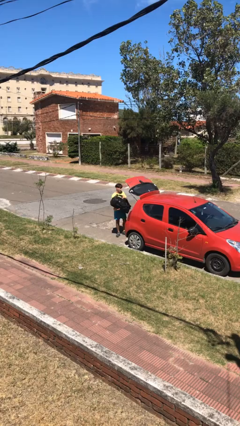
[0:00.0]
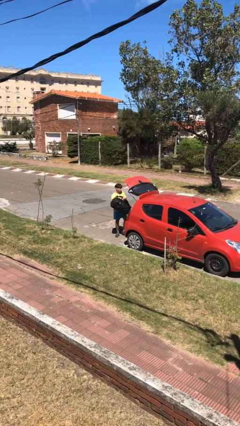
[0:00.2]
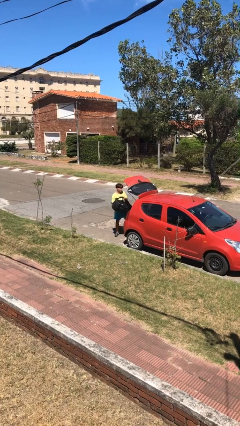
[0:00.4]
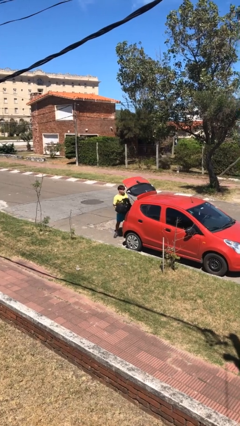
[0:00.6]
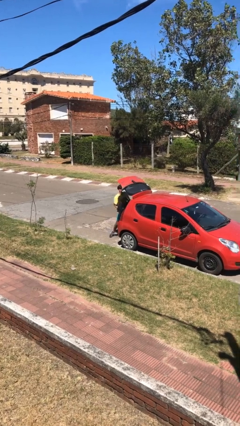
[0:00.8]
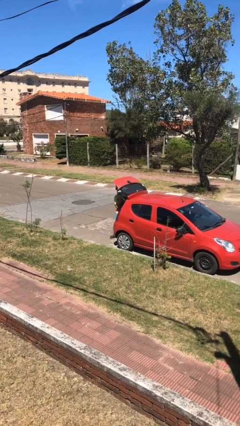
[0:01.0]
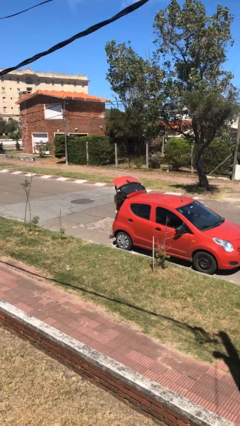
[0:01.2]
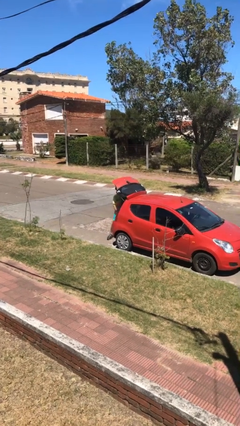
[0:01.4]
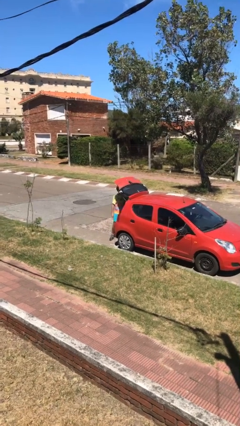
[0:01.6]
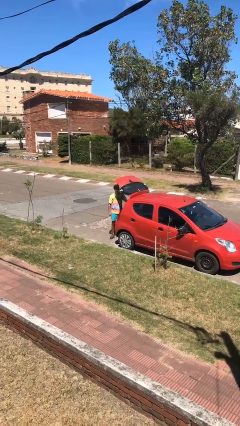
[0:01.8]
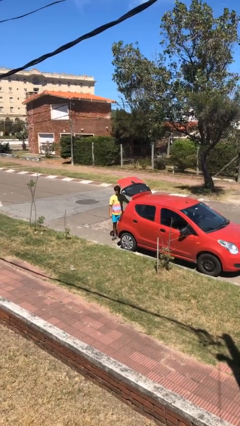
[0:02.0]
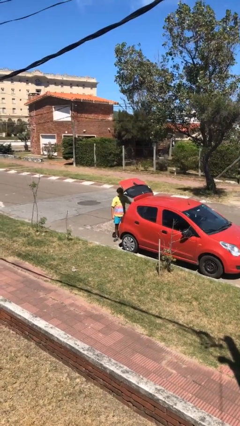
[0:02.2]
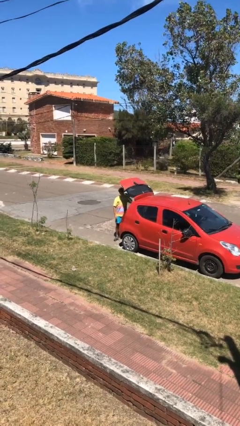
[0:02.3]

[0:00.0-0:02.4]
person loads car

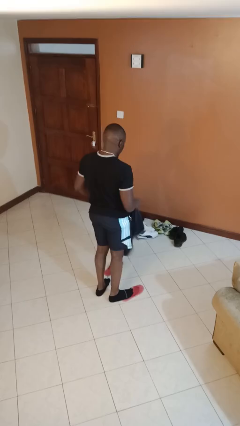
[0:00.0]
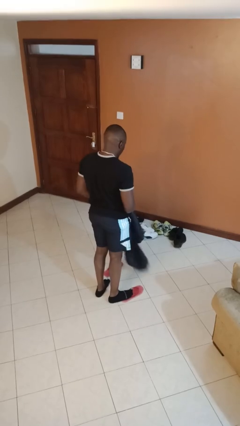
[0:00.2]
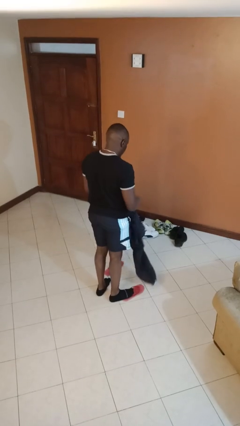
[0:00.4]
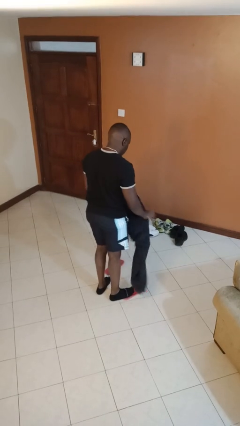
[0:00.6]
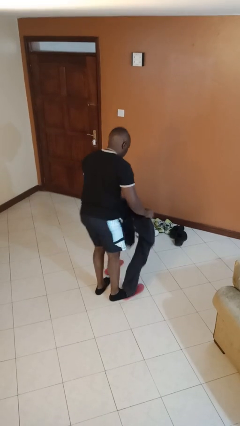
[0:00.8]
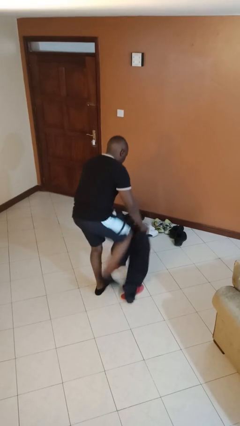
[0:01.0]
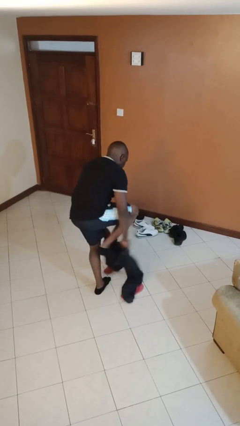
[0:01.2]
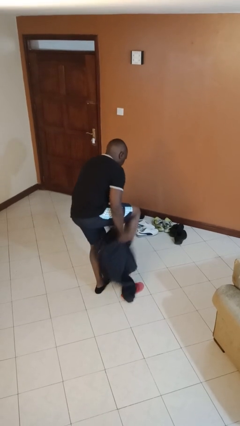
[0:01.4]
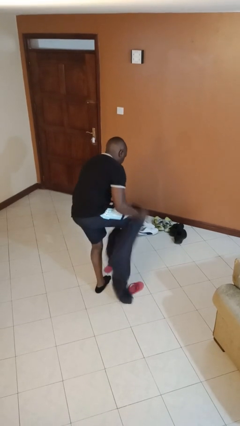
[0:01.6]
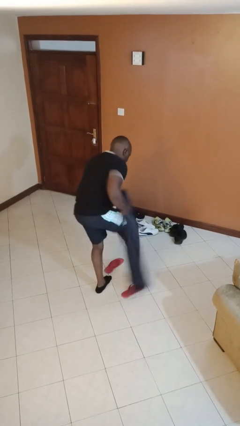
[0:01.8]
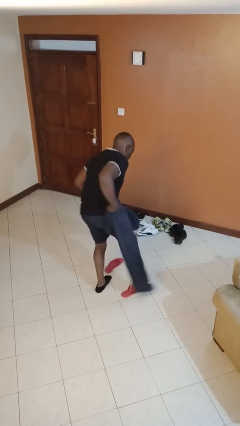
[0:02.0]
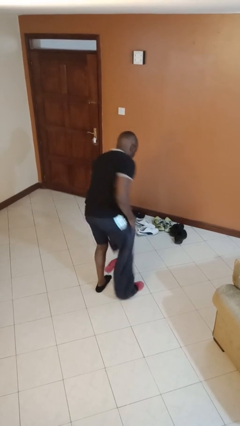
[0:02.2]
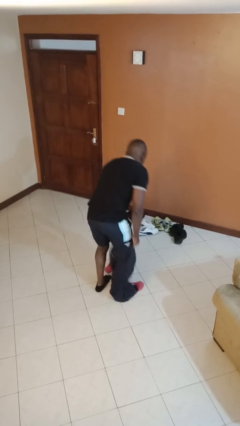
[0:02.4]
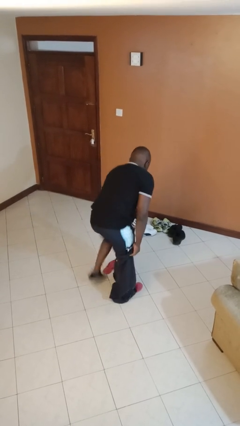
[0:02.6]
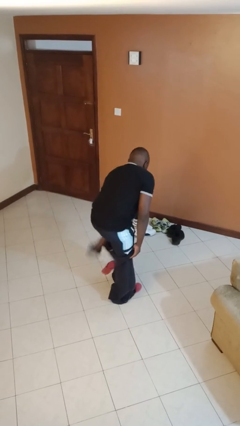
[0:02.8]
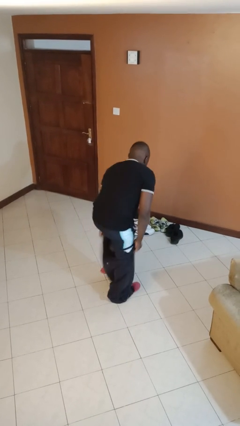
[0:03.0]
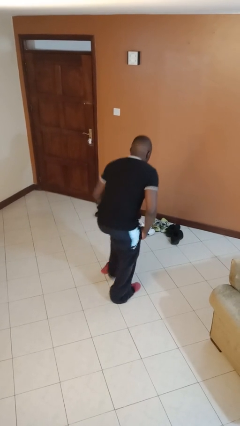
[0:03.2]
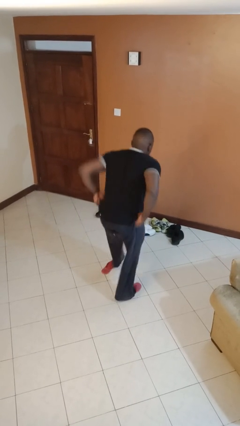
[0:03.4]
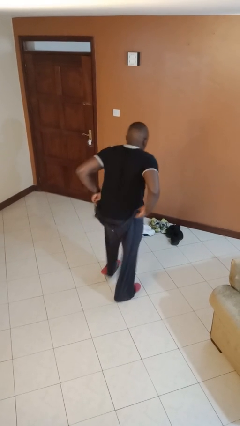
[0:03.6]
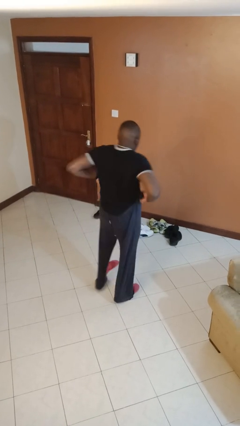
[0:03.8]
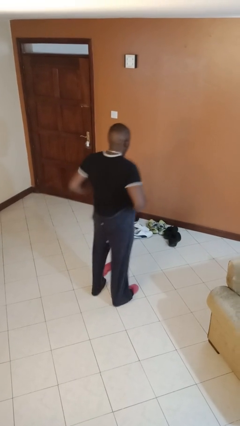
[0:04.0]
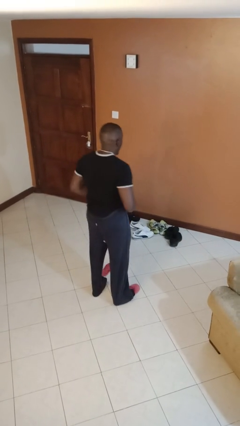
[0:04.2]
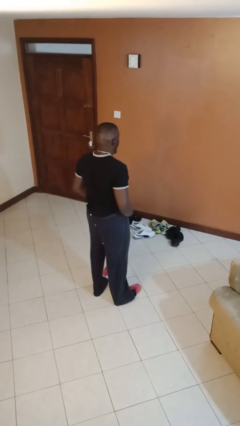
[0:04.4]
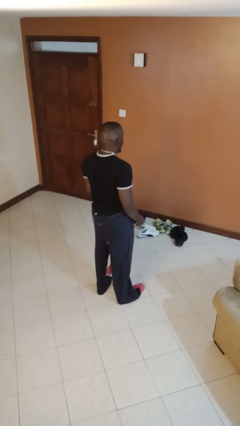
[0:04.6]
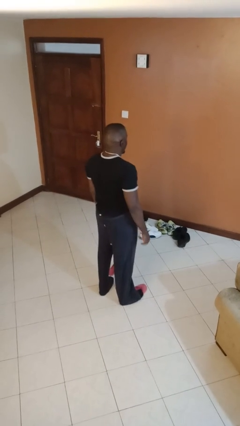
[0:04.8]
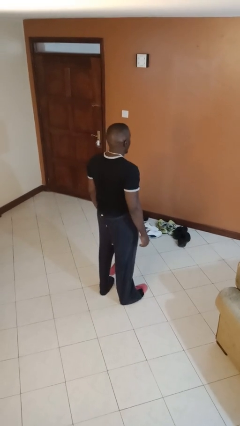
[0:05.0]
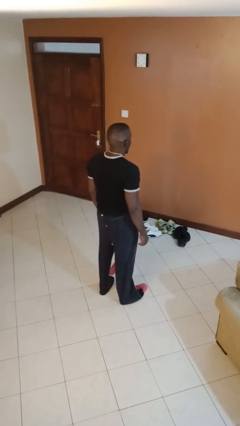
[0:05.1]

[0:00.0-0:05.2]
person puts on pants

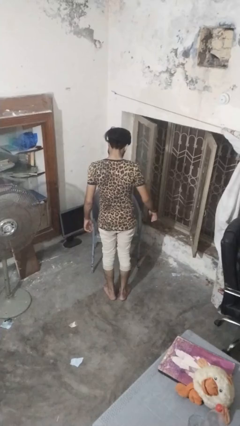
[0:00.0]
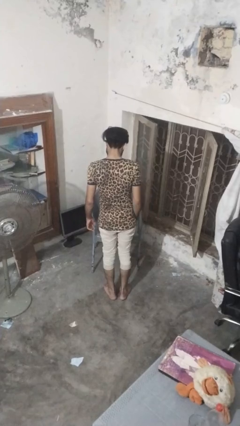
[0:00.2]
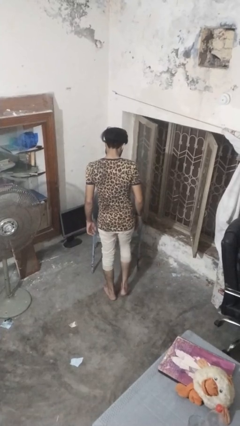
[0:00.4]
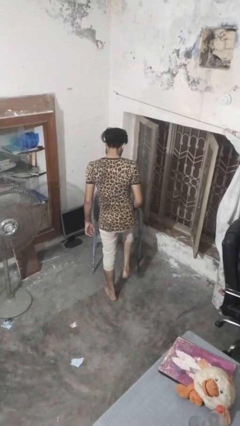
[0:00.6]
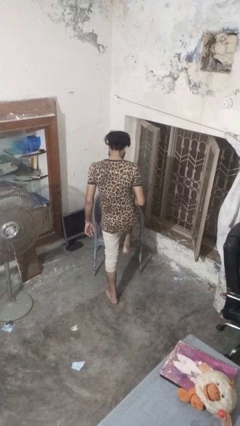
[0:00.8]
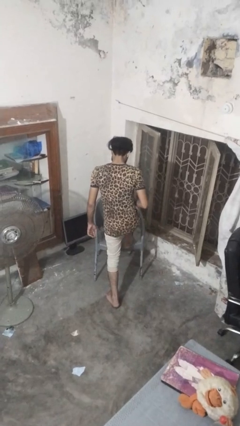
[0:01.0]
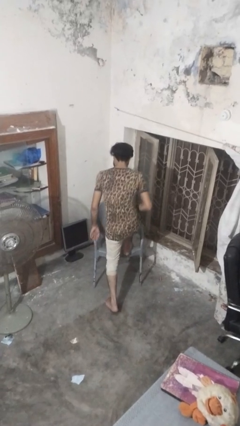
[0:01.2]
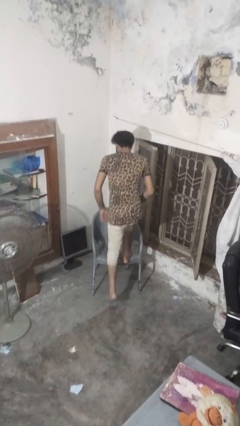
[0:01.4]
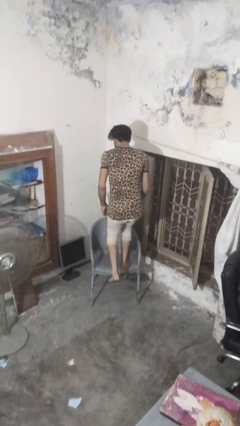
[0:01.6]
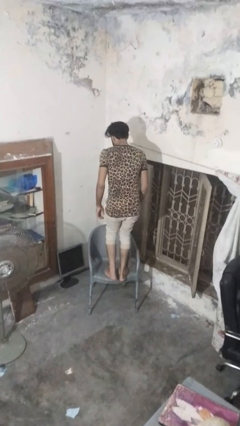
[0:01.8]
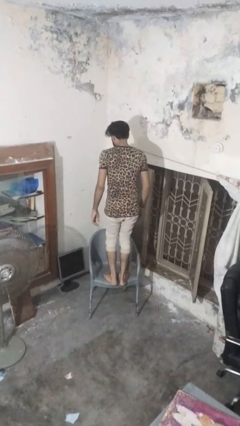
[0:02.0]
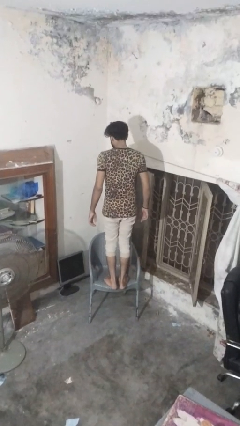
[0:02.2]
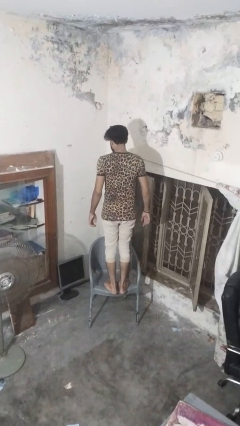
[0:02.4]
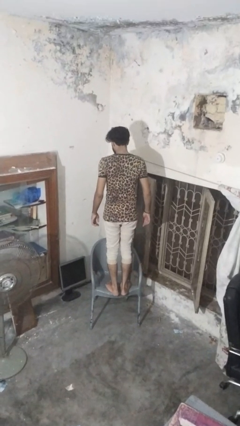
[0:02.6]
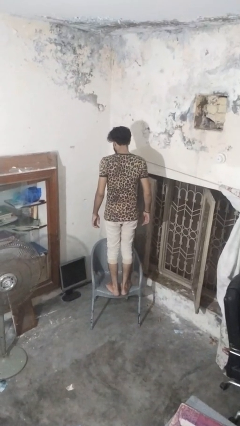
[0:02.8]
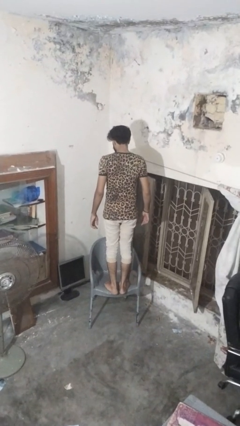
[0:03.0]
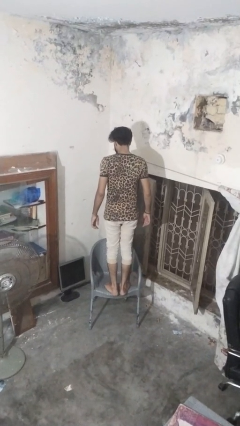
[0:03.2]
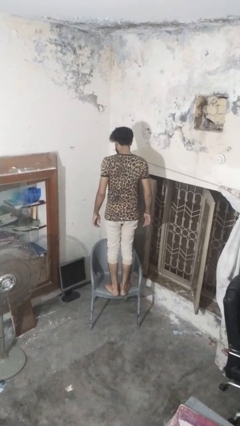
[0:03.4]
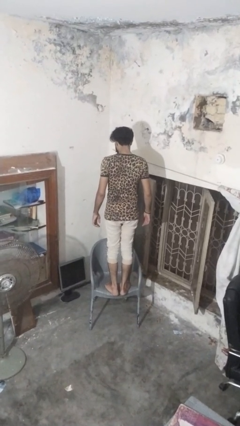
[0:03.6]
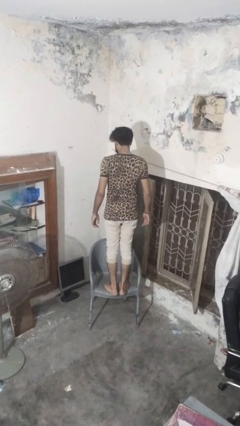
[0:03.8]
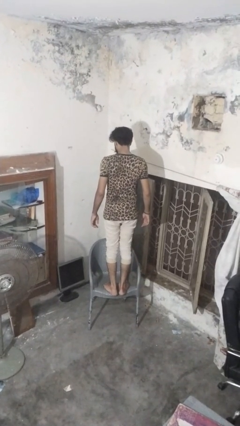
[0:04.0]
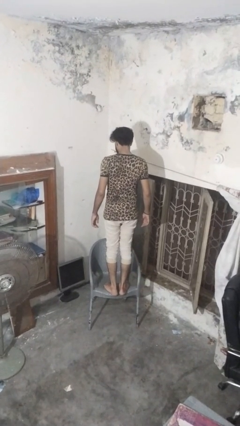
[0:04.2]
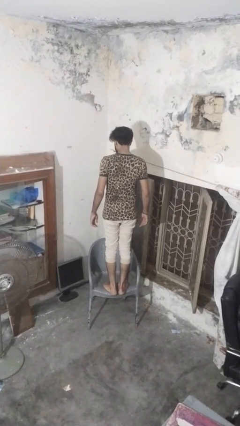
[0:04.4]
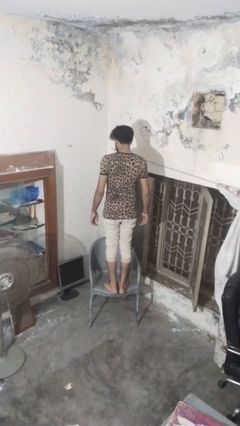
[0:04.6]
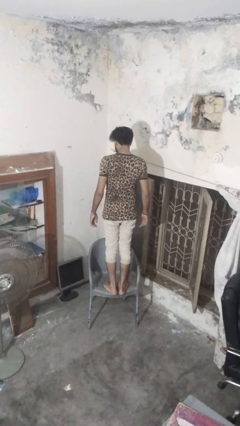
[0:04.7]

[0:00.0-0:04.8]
person climbs on chair

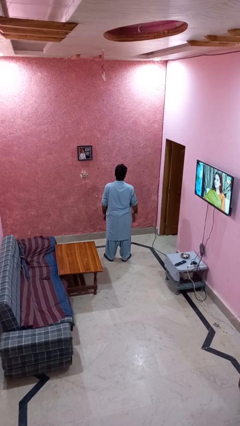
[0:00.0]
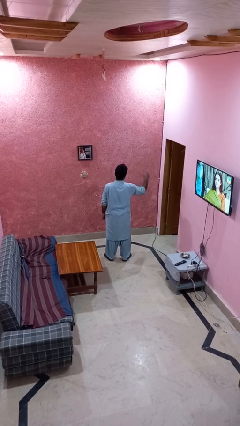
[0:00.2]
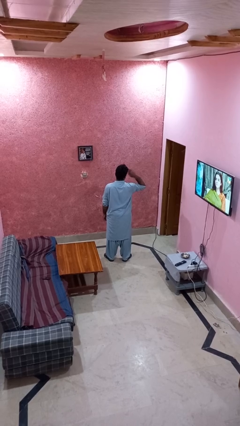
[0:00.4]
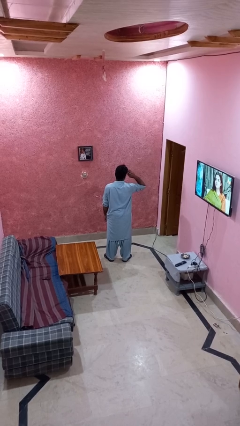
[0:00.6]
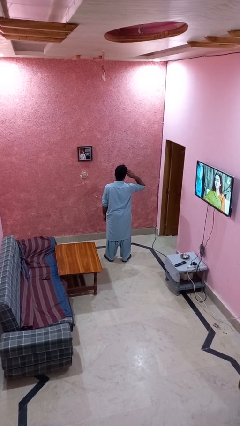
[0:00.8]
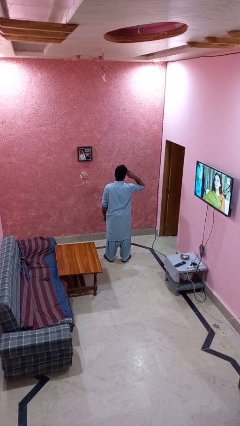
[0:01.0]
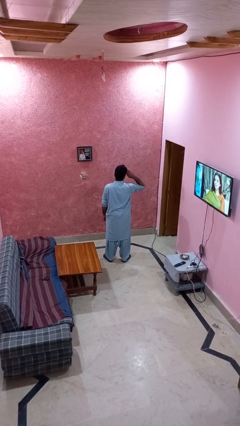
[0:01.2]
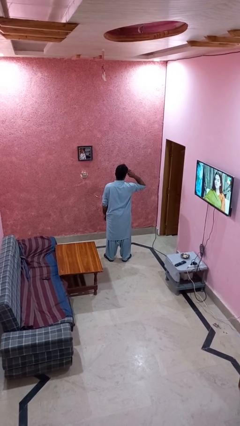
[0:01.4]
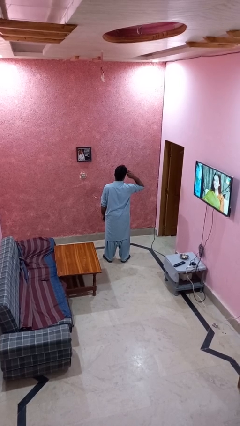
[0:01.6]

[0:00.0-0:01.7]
person salutes

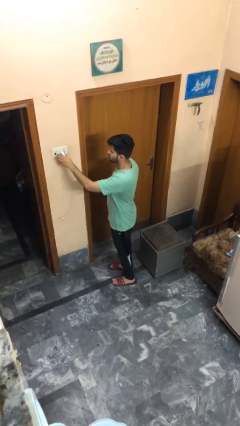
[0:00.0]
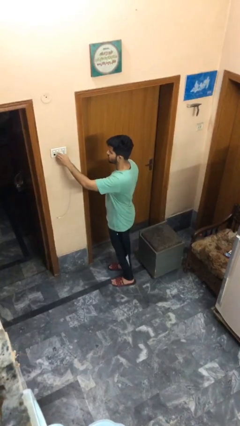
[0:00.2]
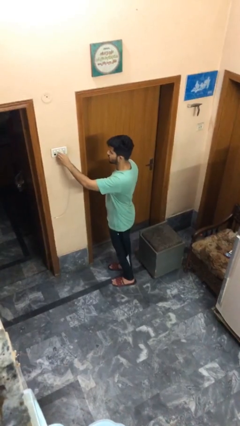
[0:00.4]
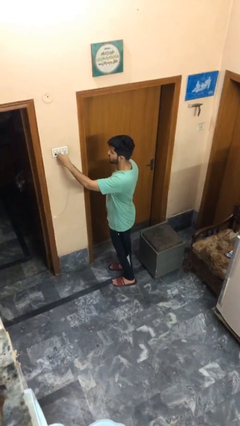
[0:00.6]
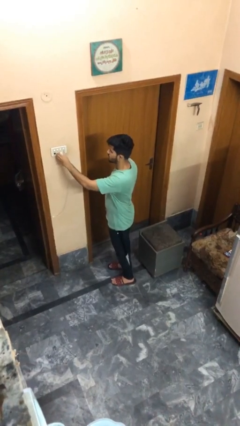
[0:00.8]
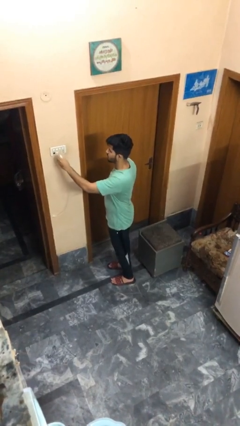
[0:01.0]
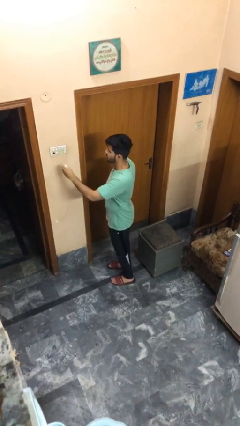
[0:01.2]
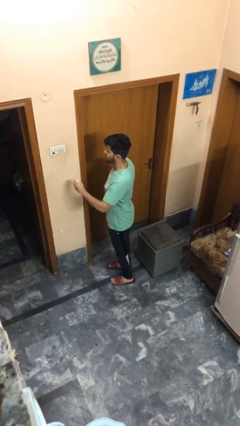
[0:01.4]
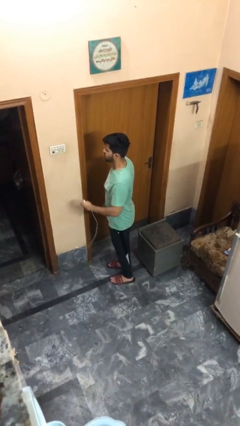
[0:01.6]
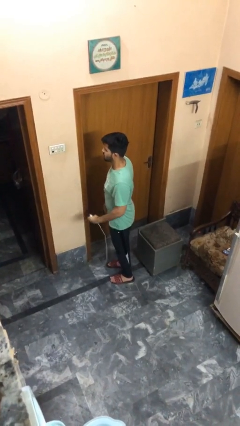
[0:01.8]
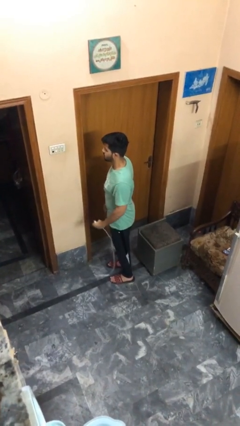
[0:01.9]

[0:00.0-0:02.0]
person unplugs from electrical socket

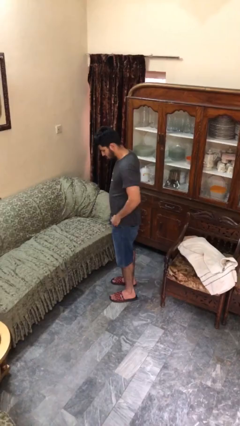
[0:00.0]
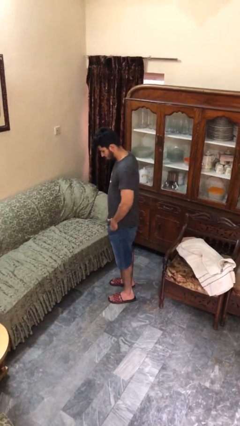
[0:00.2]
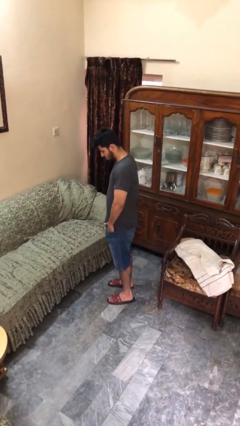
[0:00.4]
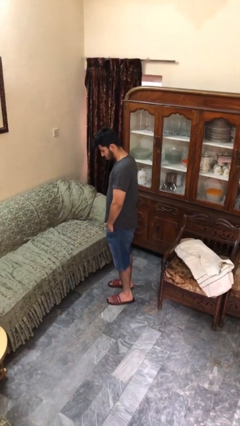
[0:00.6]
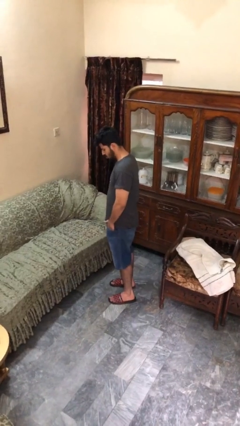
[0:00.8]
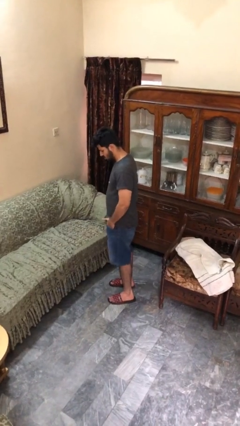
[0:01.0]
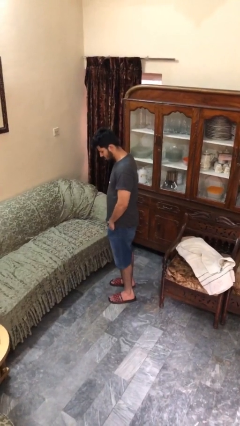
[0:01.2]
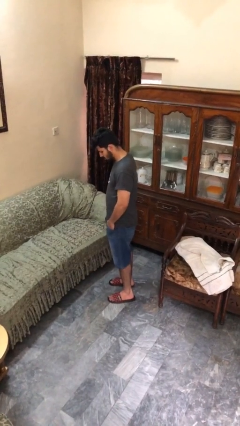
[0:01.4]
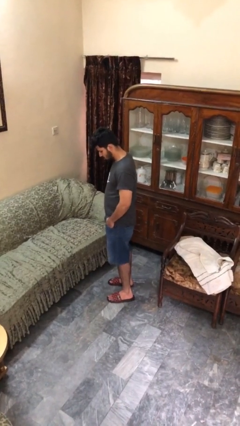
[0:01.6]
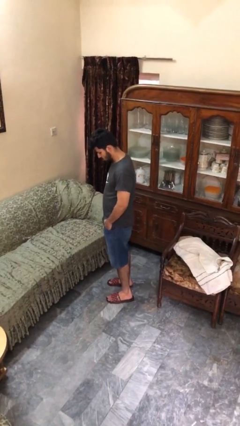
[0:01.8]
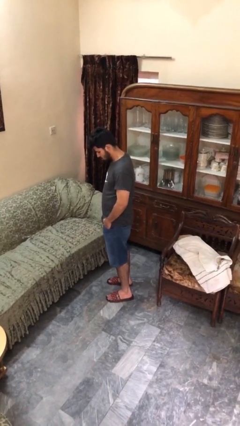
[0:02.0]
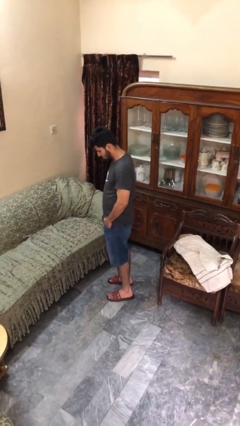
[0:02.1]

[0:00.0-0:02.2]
person puts hands in back pockets
